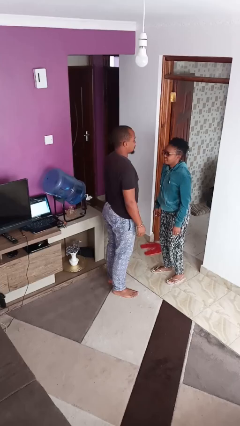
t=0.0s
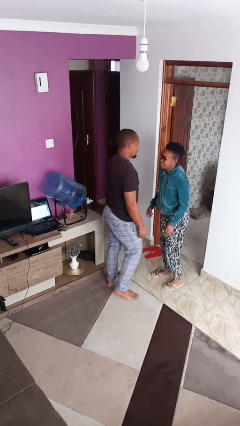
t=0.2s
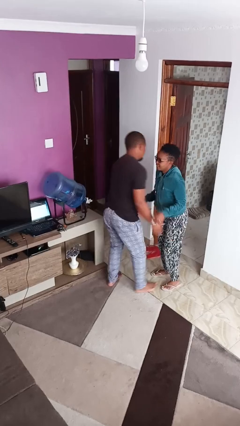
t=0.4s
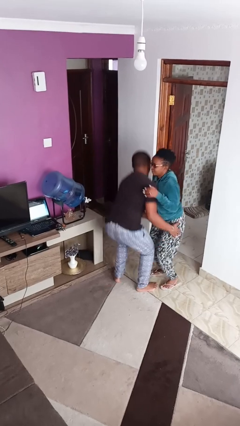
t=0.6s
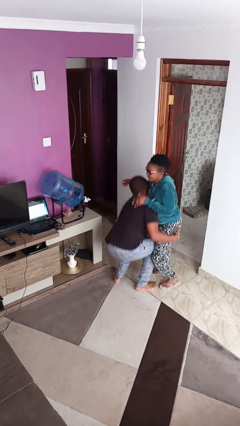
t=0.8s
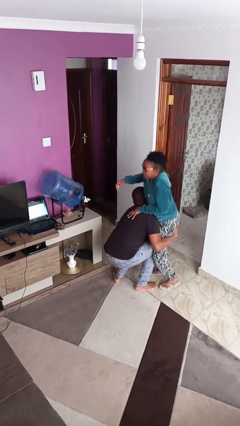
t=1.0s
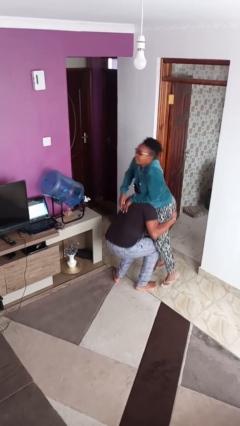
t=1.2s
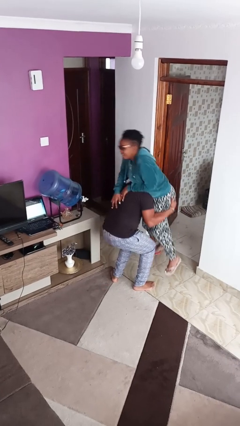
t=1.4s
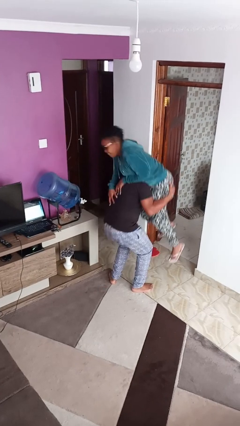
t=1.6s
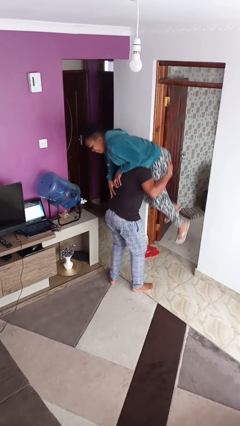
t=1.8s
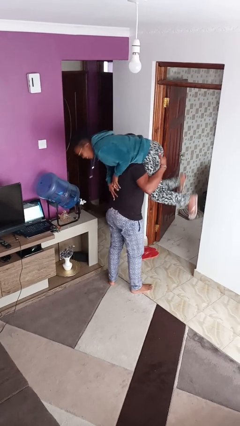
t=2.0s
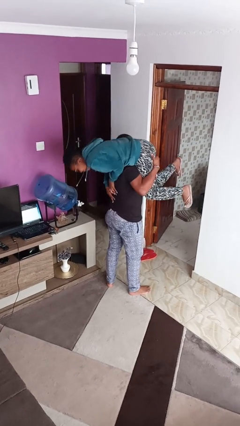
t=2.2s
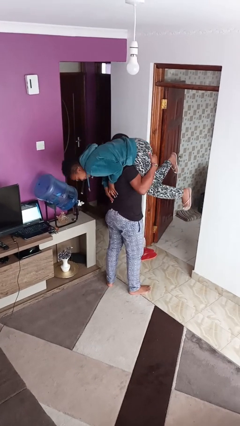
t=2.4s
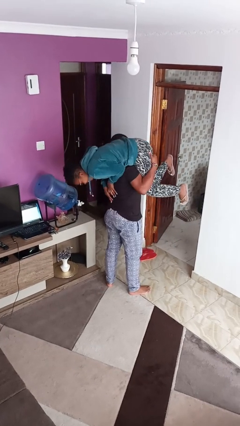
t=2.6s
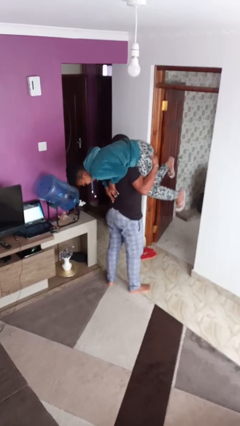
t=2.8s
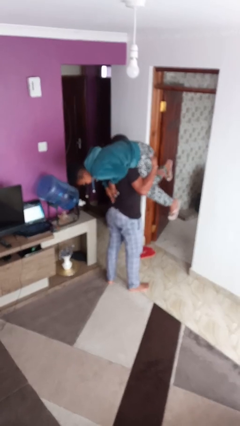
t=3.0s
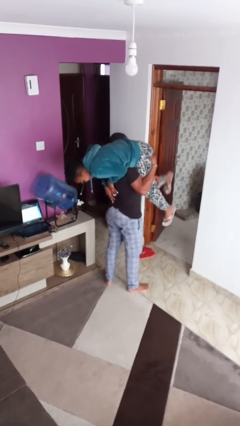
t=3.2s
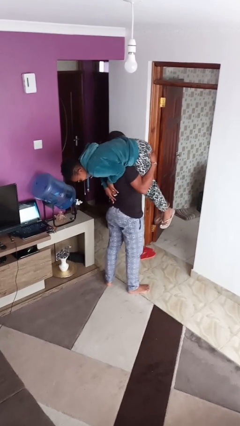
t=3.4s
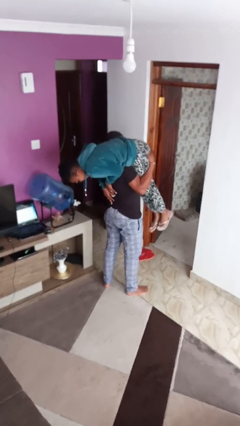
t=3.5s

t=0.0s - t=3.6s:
person carries person over shoulder

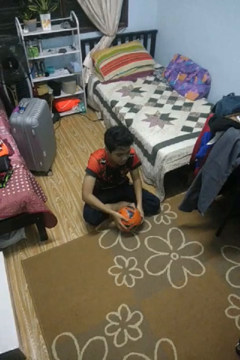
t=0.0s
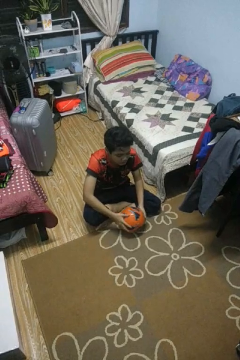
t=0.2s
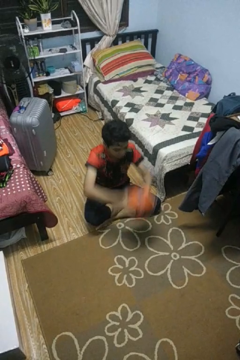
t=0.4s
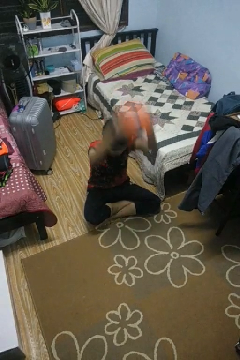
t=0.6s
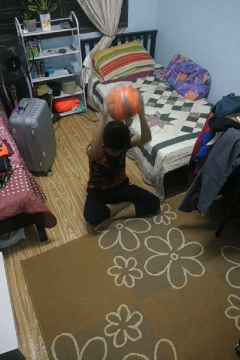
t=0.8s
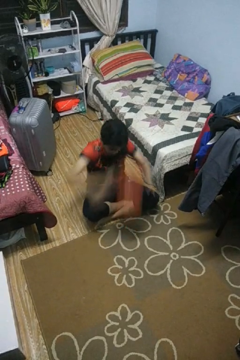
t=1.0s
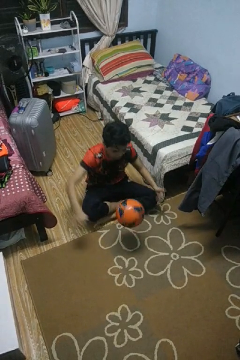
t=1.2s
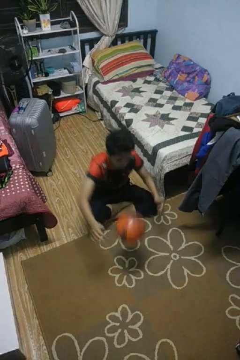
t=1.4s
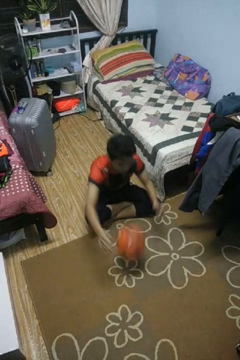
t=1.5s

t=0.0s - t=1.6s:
person bounces ball on floor

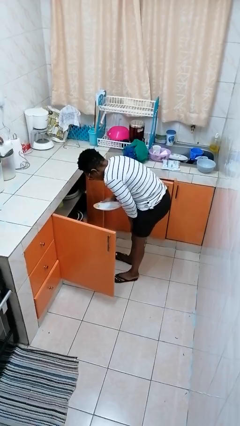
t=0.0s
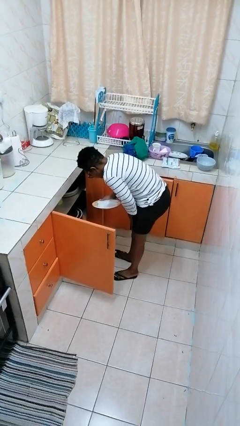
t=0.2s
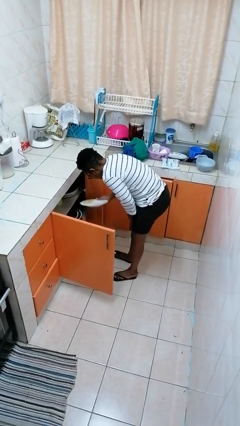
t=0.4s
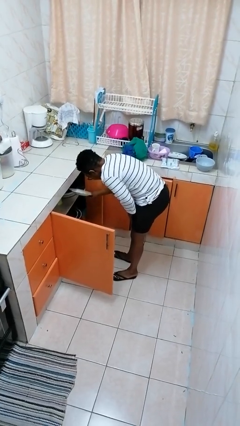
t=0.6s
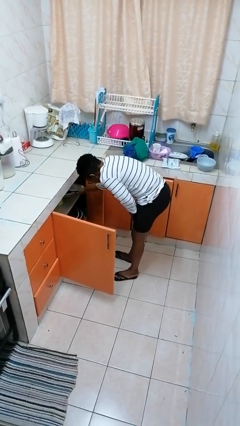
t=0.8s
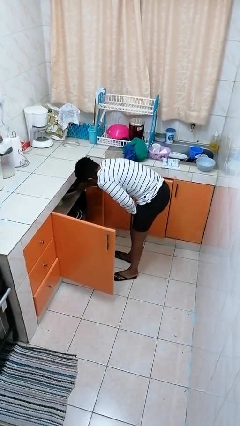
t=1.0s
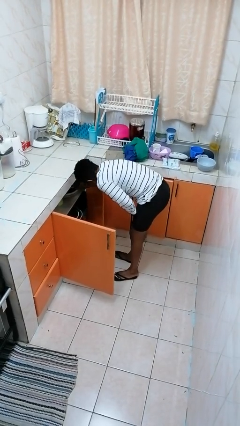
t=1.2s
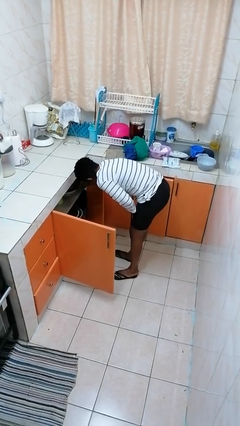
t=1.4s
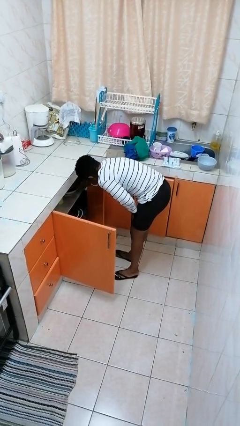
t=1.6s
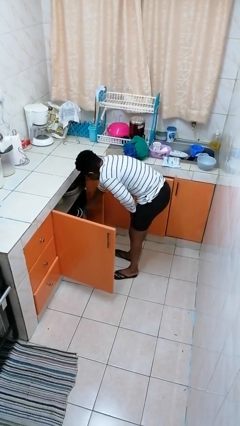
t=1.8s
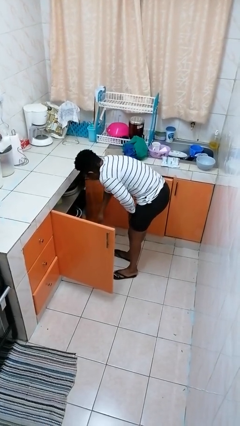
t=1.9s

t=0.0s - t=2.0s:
person puts object in cabinet

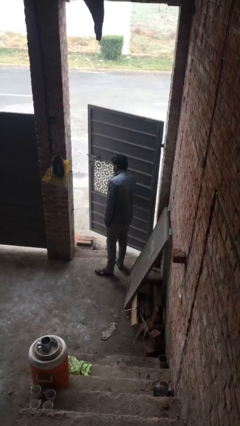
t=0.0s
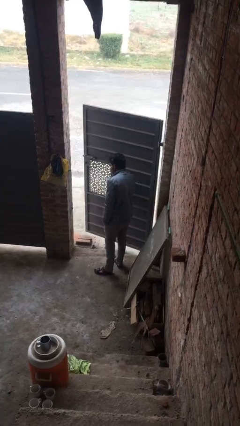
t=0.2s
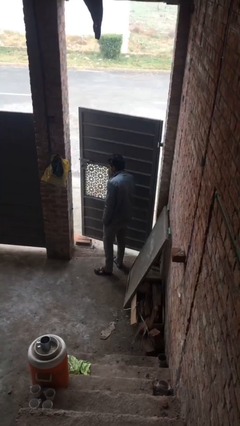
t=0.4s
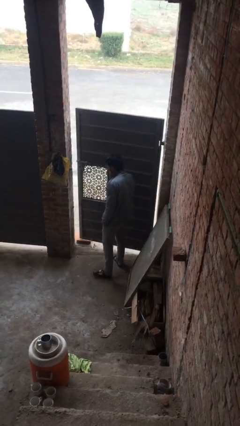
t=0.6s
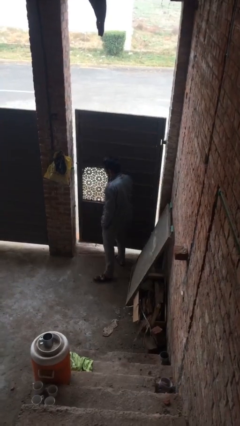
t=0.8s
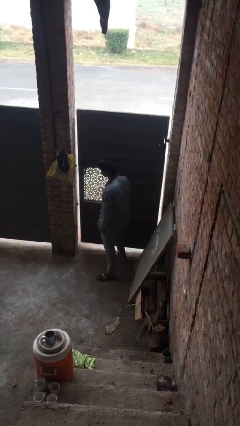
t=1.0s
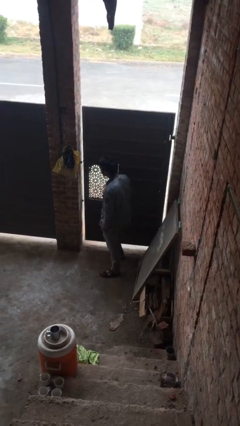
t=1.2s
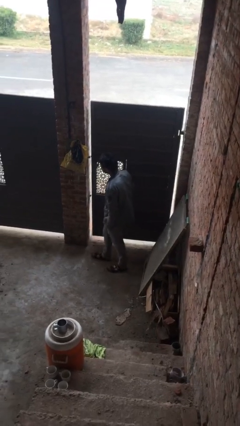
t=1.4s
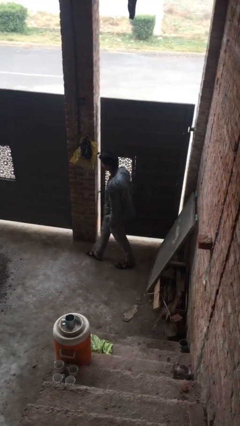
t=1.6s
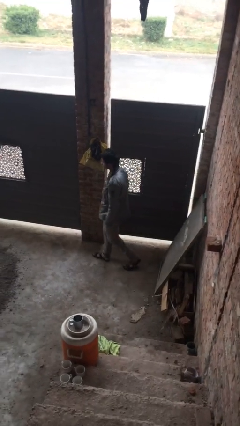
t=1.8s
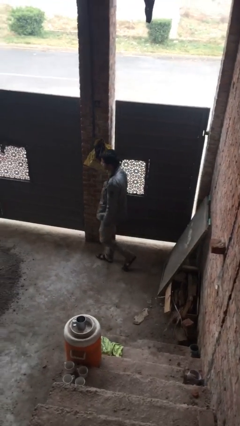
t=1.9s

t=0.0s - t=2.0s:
person closes facility door

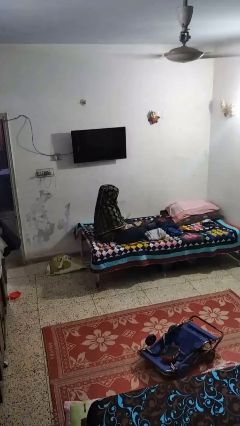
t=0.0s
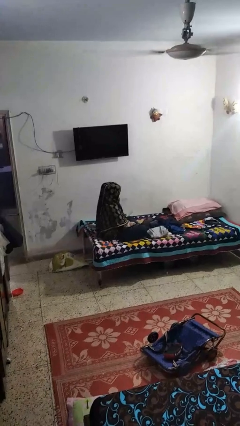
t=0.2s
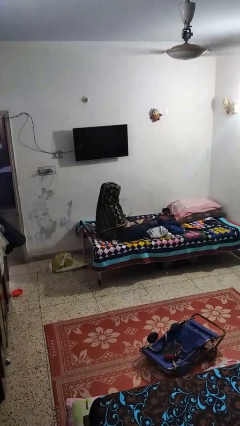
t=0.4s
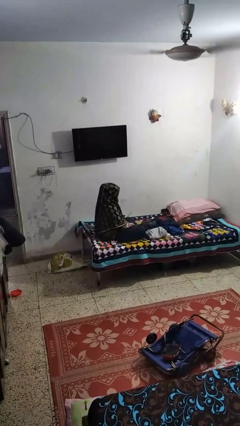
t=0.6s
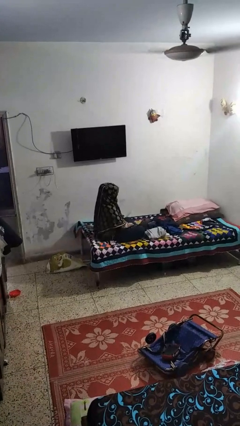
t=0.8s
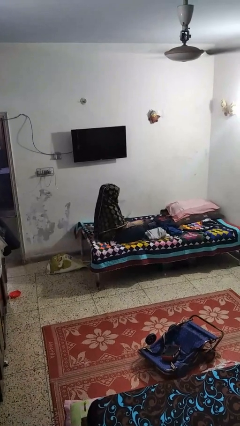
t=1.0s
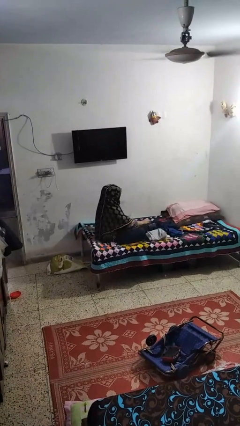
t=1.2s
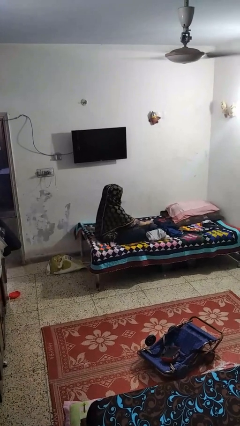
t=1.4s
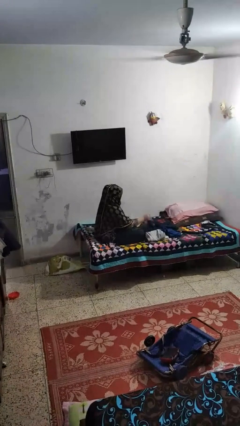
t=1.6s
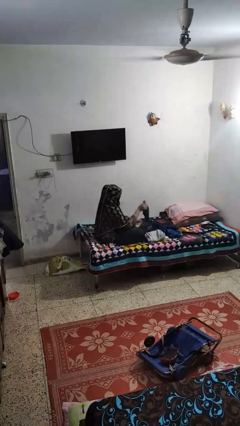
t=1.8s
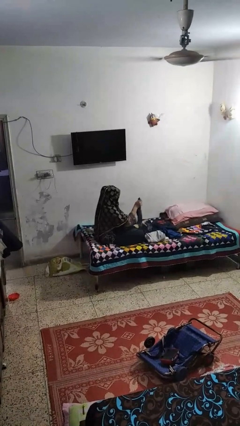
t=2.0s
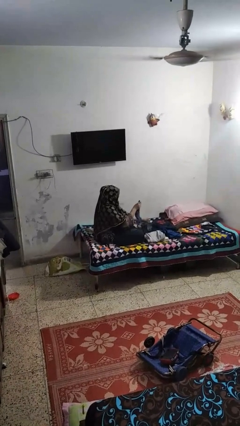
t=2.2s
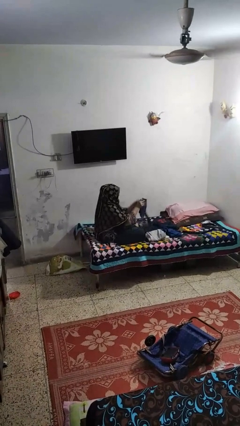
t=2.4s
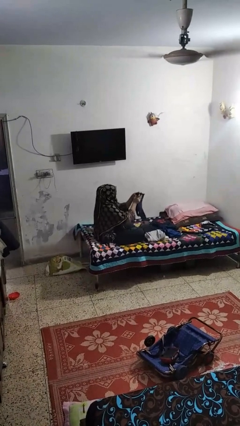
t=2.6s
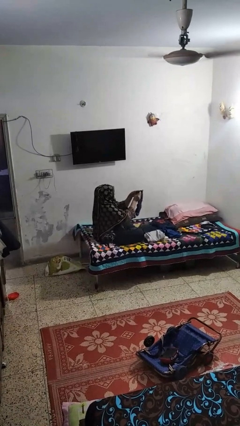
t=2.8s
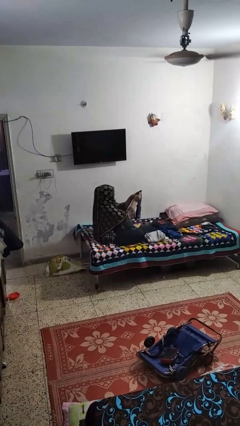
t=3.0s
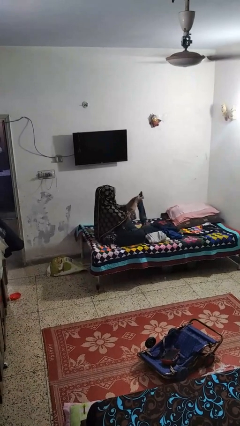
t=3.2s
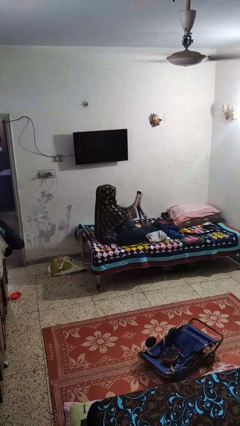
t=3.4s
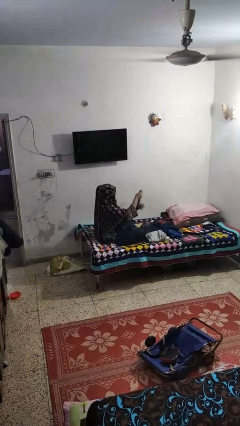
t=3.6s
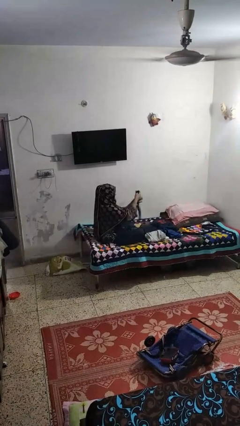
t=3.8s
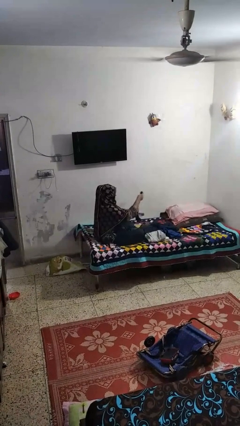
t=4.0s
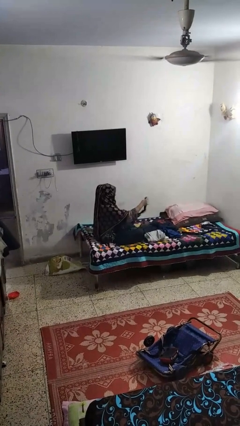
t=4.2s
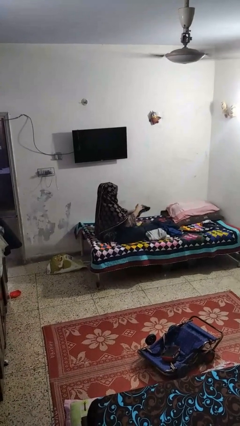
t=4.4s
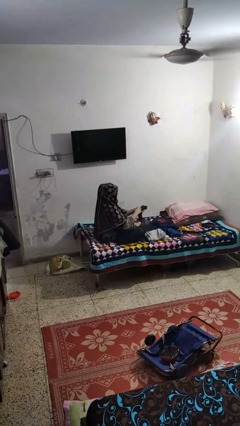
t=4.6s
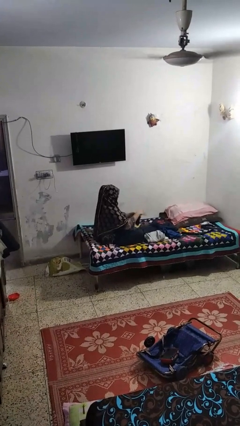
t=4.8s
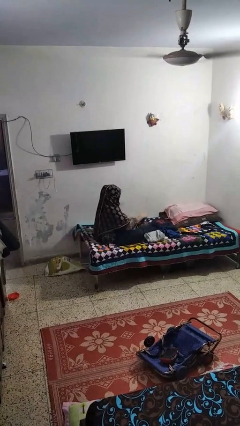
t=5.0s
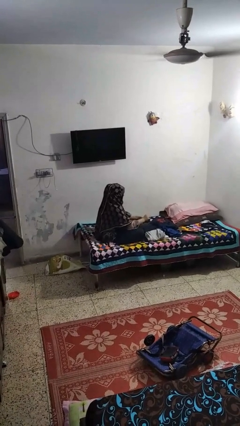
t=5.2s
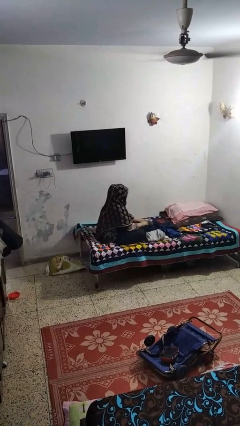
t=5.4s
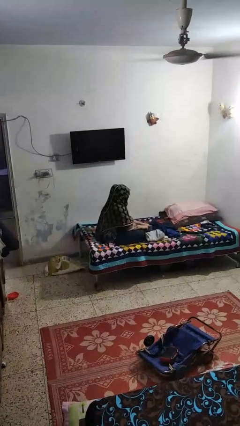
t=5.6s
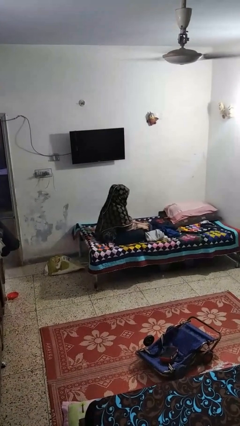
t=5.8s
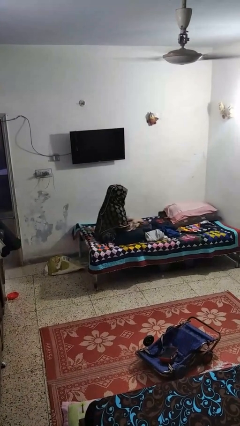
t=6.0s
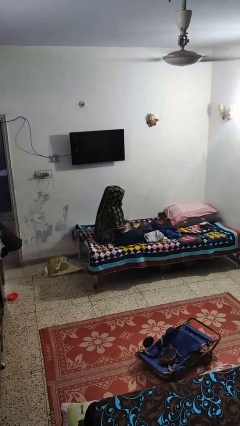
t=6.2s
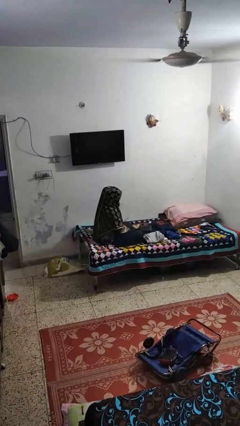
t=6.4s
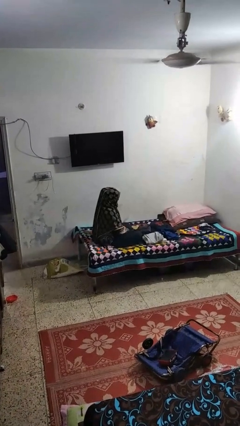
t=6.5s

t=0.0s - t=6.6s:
person folds socks

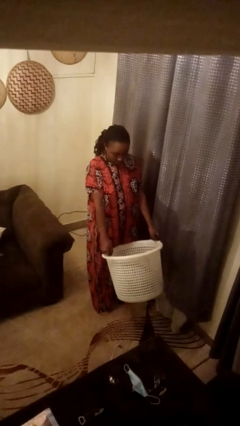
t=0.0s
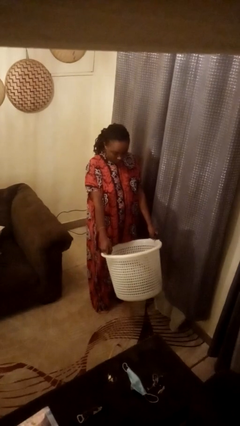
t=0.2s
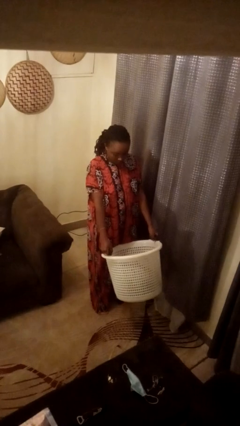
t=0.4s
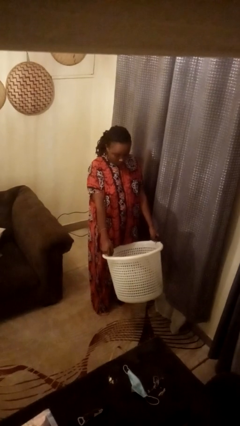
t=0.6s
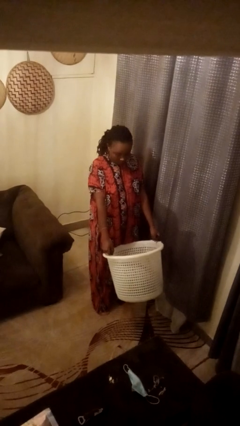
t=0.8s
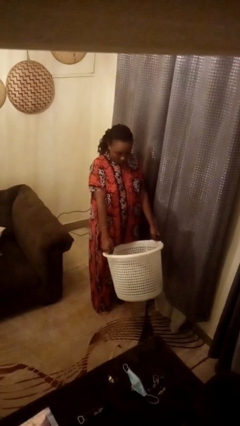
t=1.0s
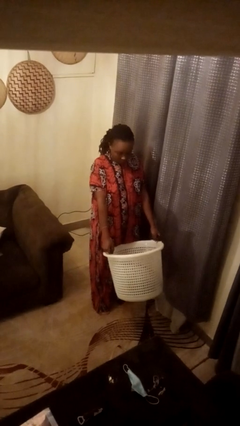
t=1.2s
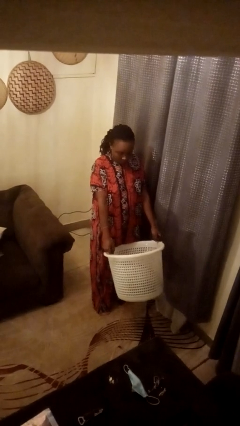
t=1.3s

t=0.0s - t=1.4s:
person carries laundry basket

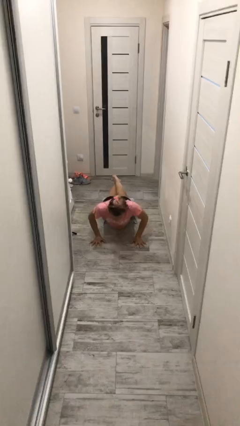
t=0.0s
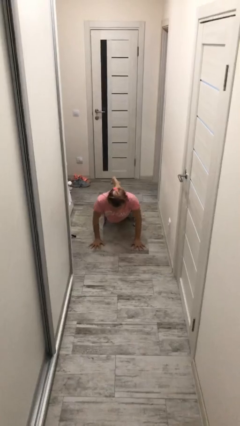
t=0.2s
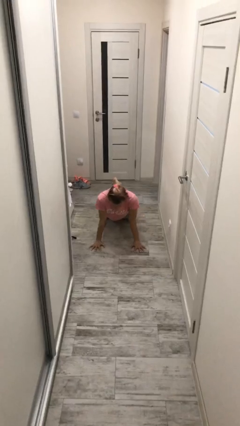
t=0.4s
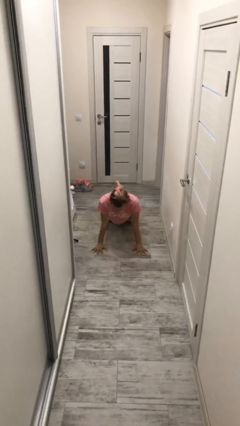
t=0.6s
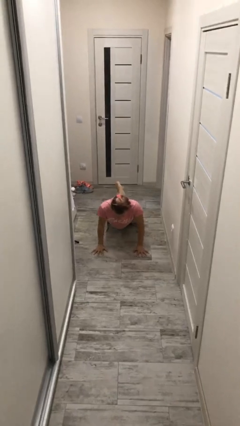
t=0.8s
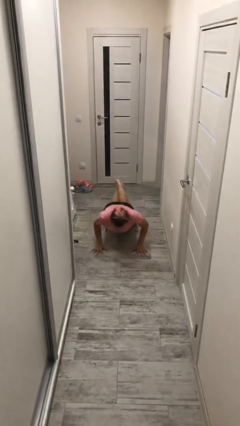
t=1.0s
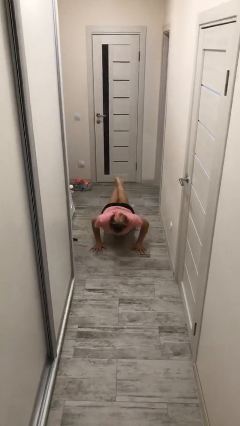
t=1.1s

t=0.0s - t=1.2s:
person exercises with pushup
